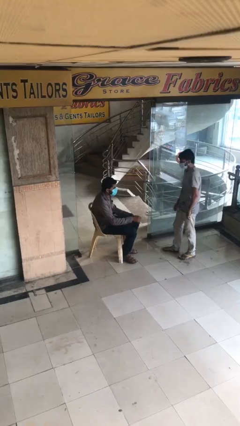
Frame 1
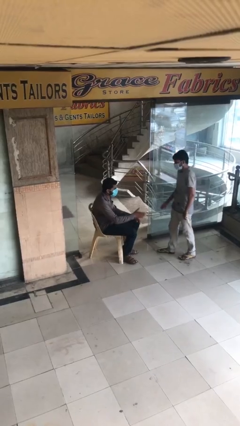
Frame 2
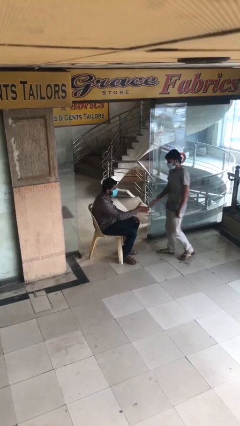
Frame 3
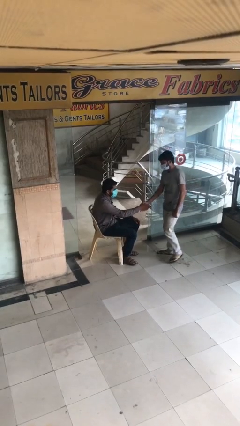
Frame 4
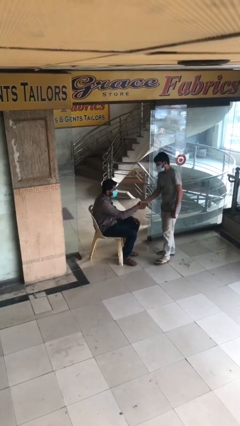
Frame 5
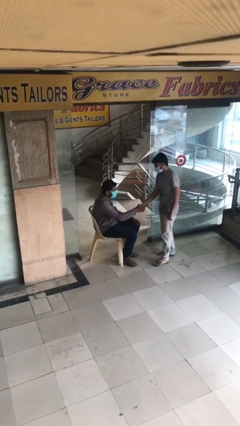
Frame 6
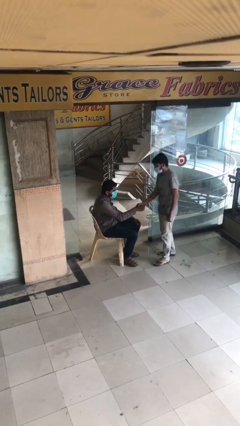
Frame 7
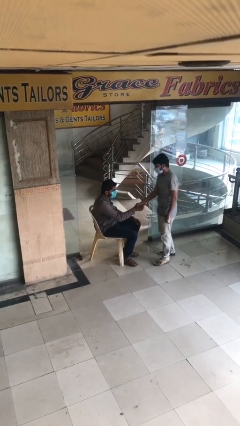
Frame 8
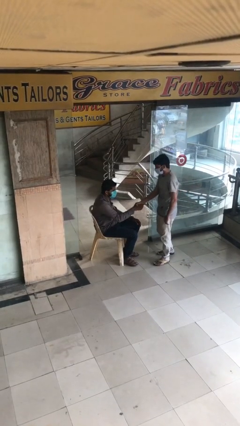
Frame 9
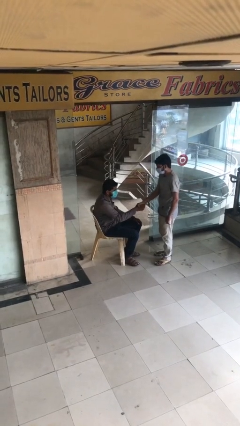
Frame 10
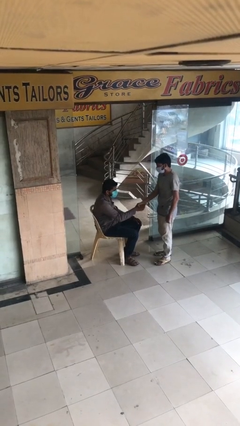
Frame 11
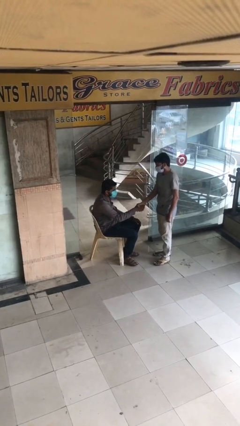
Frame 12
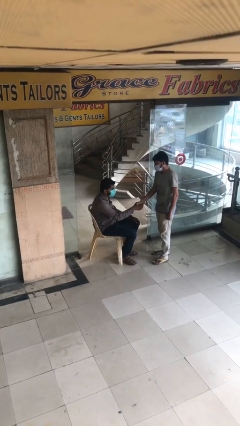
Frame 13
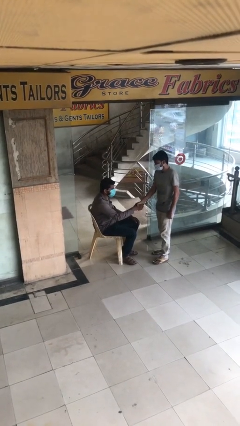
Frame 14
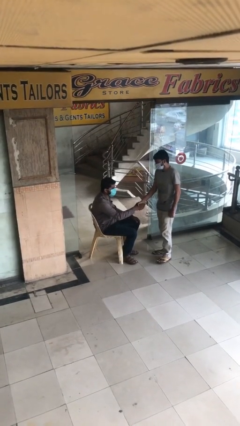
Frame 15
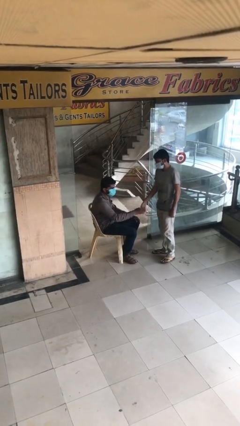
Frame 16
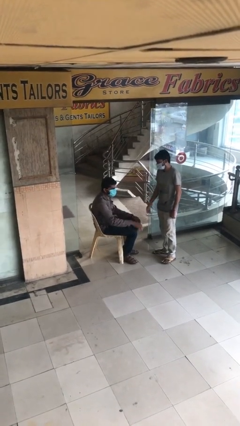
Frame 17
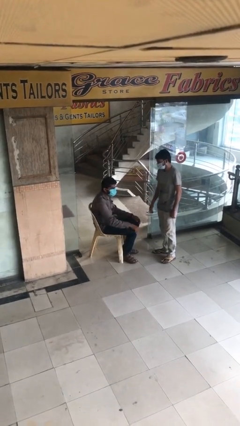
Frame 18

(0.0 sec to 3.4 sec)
person shakes hand

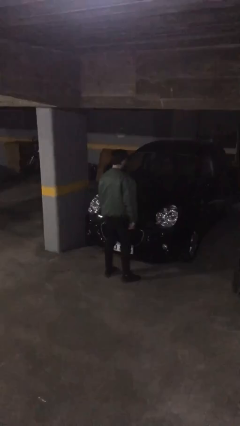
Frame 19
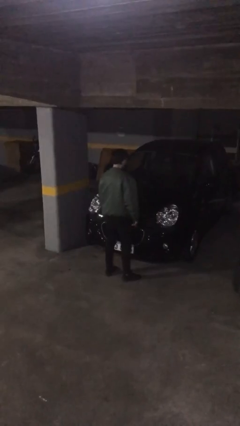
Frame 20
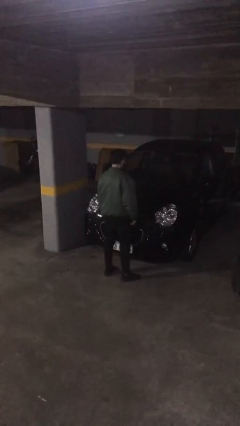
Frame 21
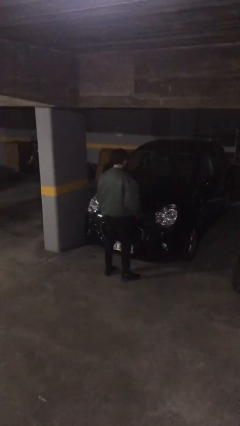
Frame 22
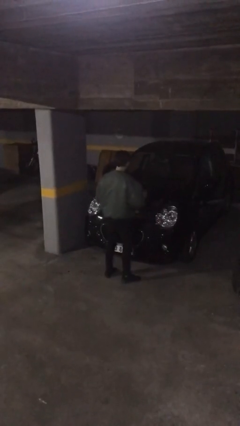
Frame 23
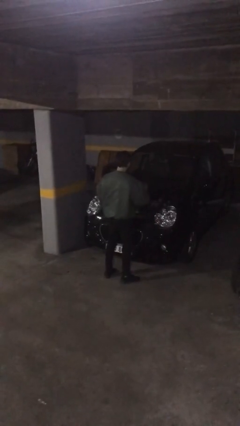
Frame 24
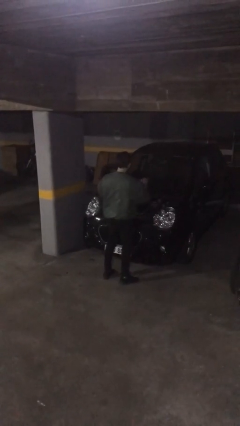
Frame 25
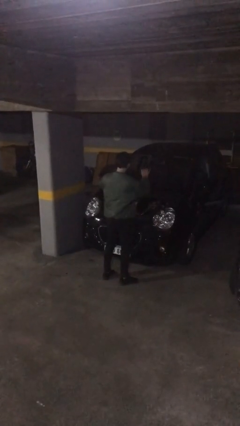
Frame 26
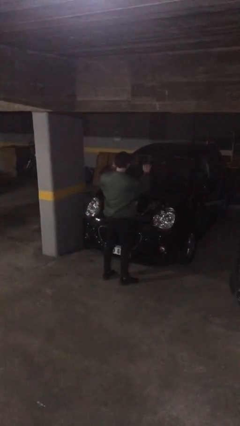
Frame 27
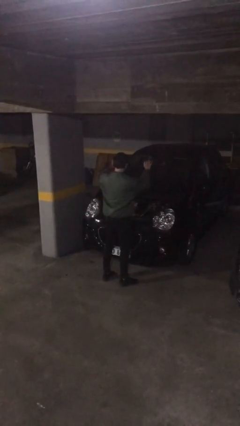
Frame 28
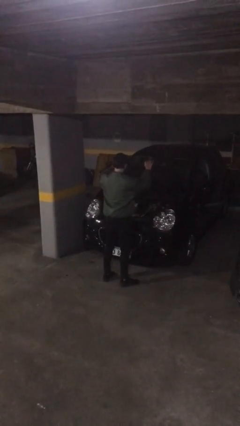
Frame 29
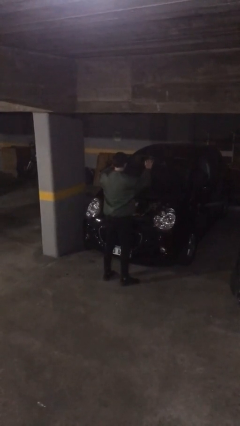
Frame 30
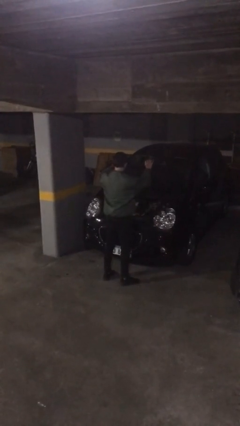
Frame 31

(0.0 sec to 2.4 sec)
person opens car hood

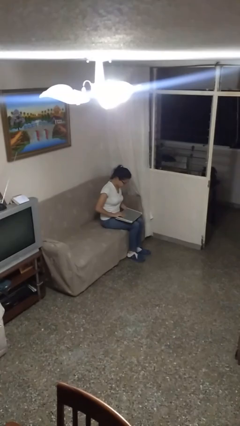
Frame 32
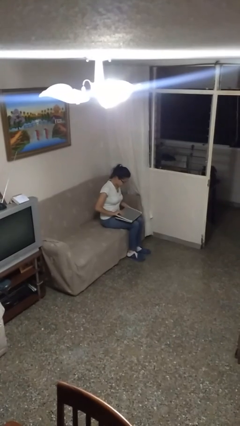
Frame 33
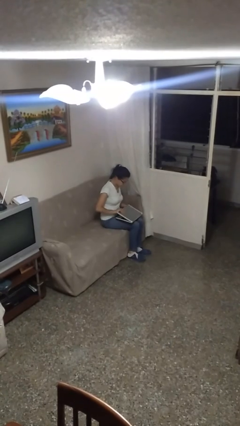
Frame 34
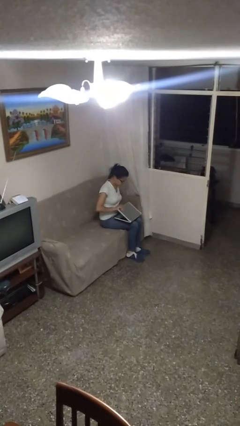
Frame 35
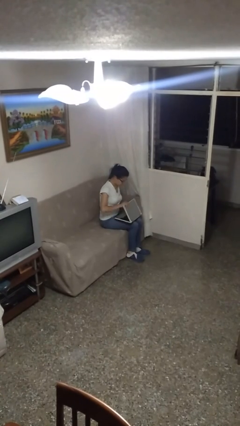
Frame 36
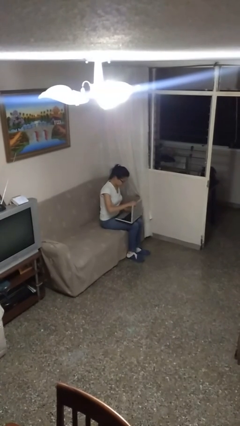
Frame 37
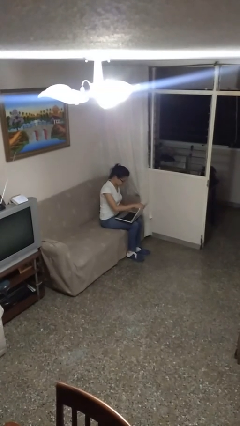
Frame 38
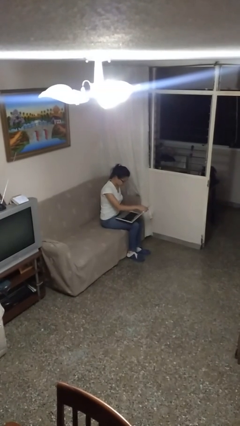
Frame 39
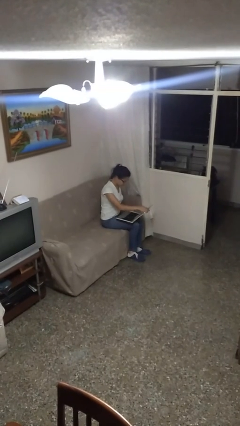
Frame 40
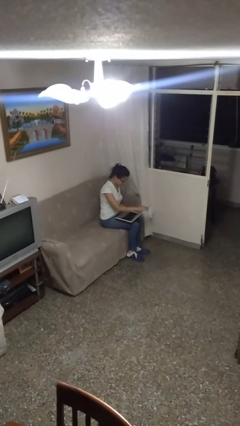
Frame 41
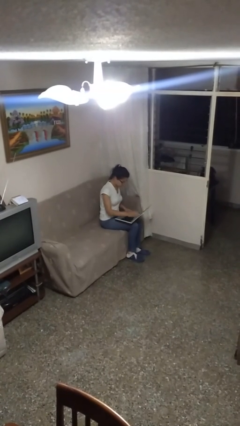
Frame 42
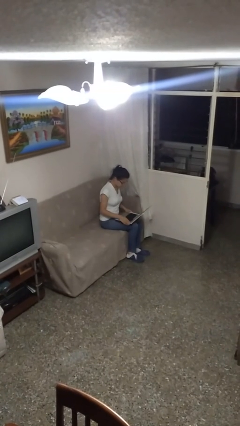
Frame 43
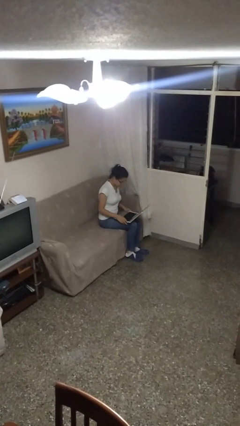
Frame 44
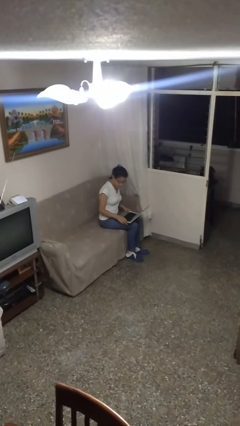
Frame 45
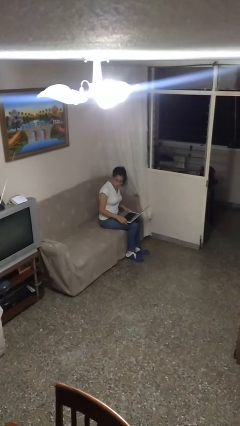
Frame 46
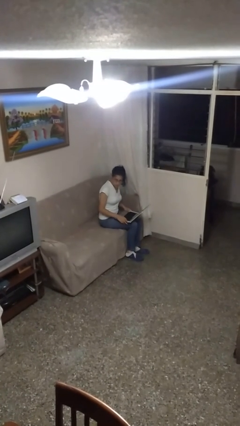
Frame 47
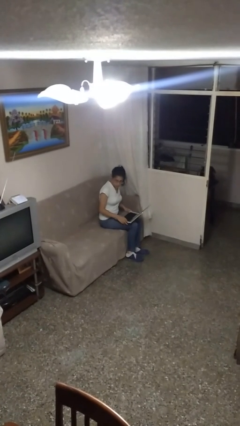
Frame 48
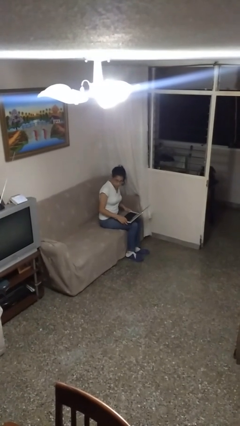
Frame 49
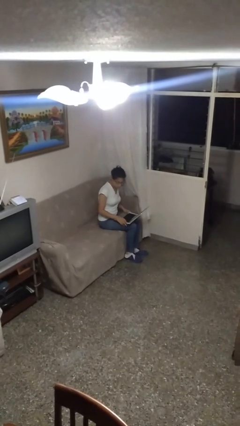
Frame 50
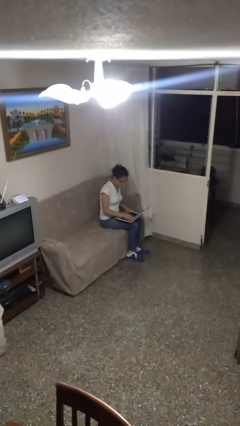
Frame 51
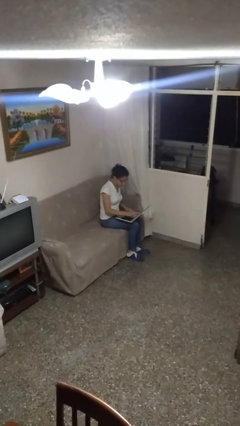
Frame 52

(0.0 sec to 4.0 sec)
person opens laptop

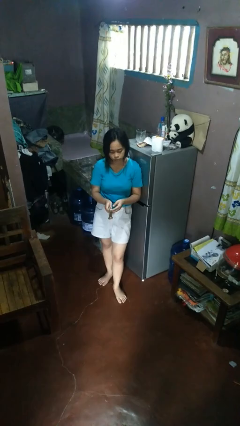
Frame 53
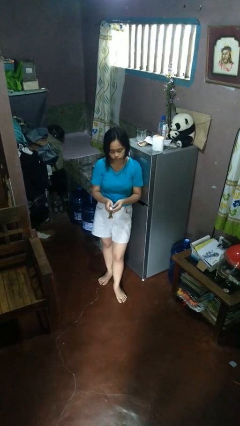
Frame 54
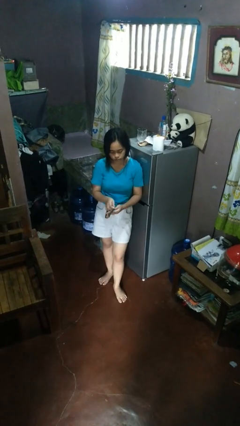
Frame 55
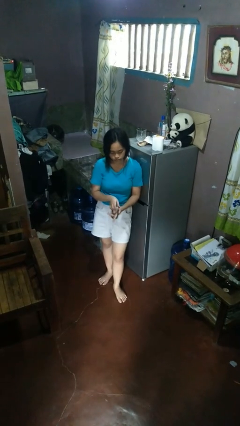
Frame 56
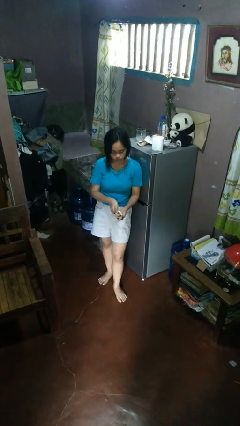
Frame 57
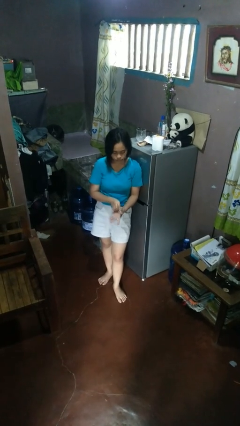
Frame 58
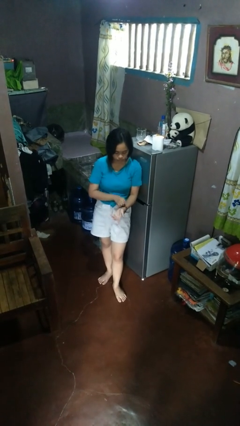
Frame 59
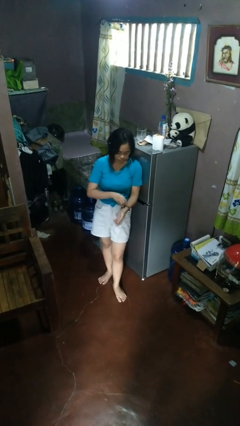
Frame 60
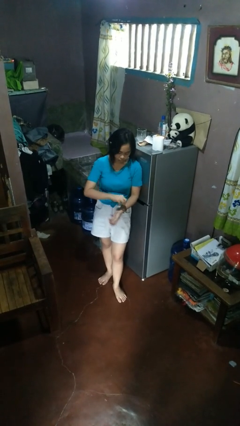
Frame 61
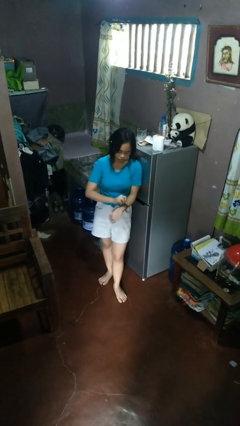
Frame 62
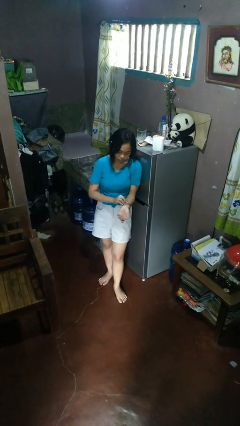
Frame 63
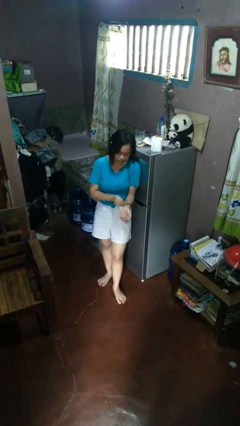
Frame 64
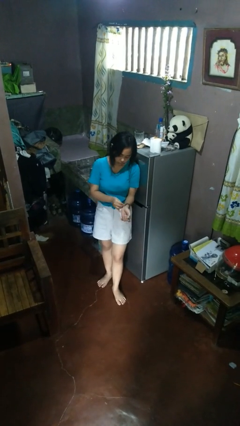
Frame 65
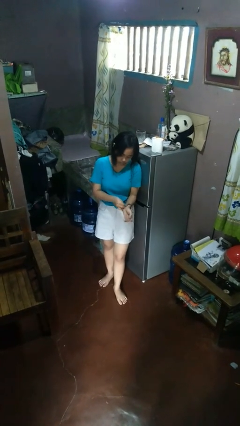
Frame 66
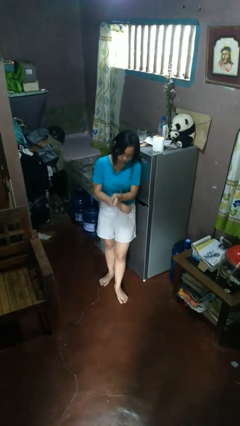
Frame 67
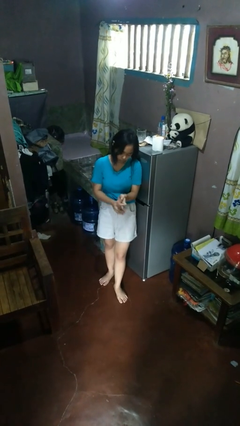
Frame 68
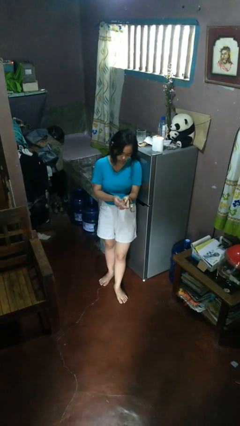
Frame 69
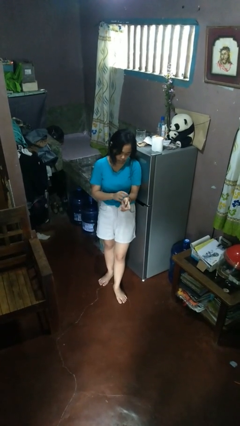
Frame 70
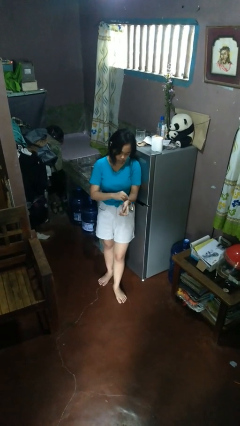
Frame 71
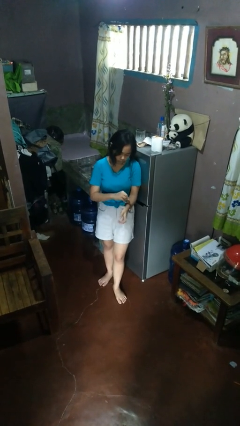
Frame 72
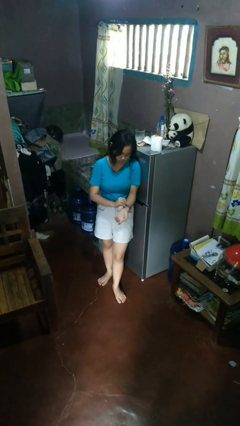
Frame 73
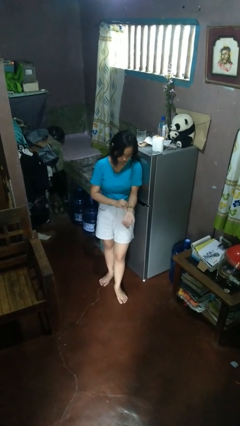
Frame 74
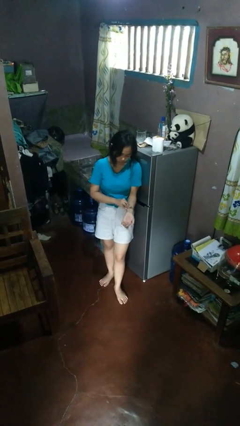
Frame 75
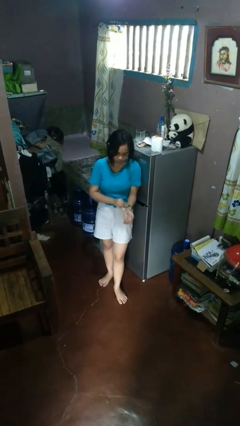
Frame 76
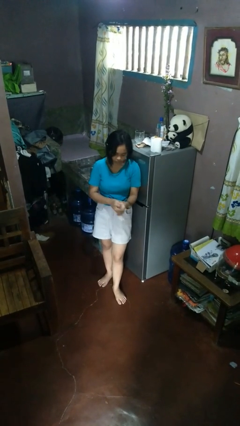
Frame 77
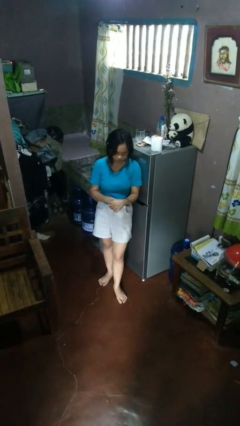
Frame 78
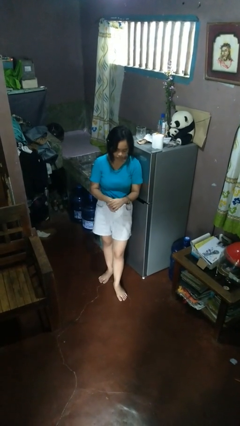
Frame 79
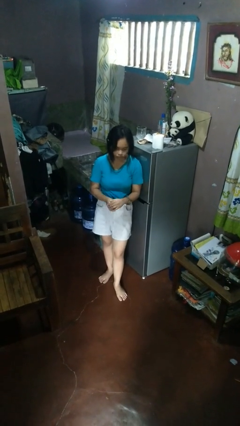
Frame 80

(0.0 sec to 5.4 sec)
person puts on wristwatch

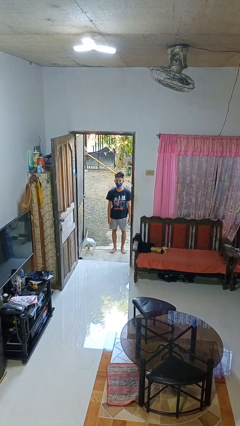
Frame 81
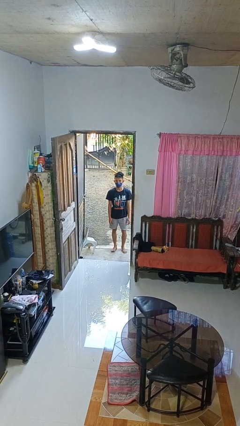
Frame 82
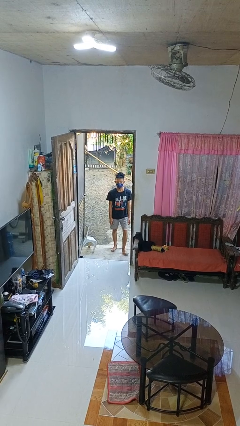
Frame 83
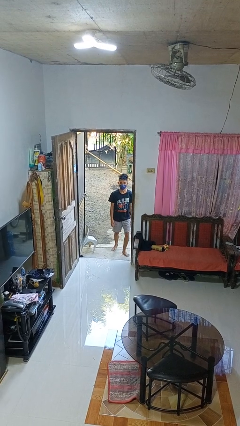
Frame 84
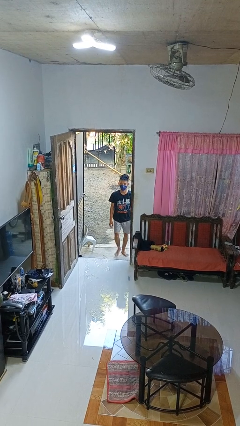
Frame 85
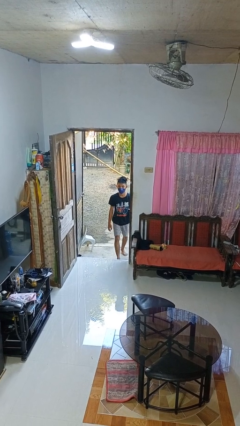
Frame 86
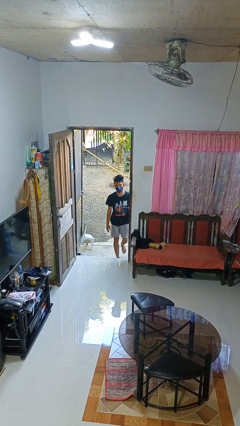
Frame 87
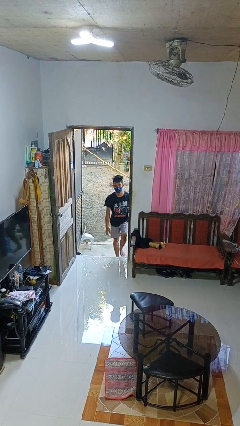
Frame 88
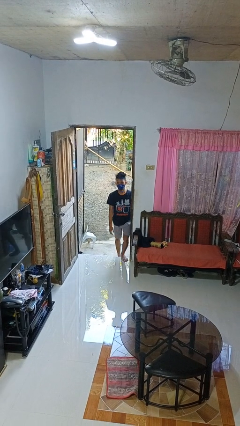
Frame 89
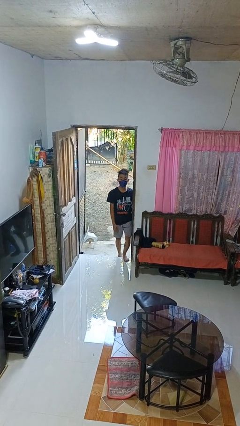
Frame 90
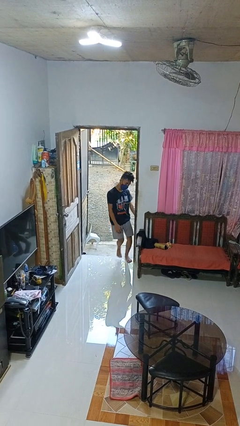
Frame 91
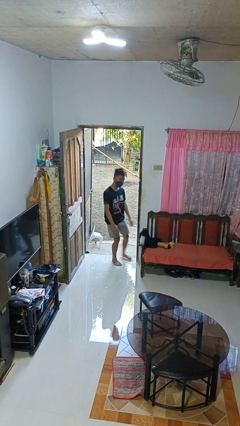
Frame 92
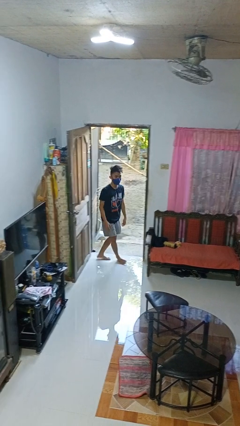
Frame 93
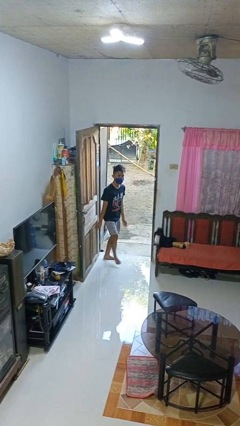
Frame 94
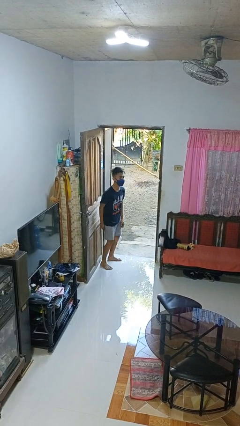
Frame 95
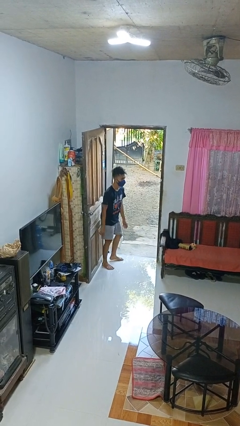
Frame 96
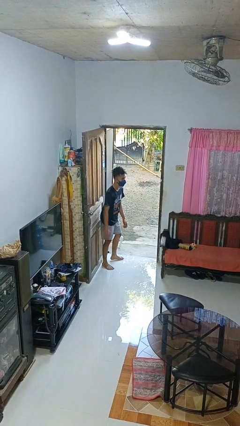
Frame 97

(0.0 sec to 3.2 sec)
person bumps into wall
